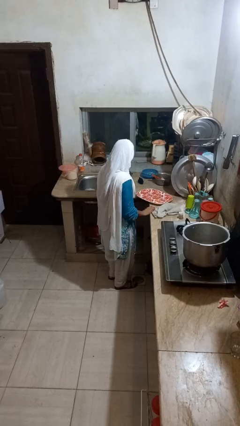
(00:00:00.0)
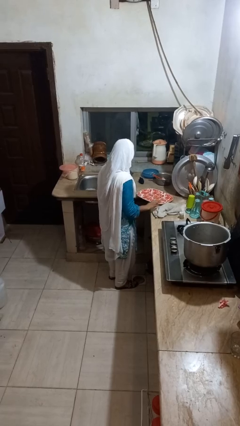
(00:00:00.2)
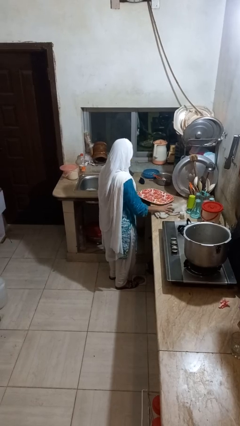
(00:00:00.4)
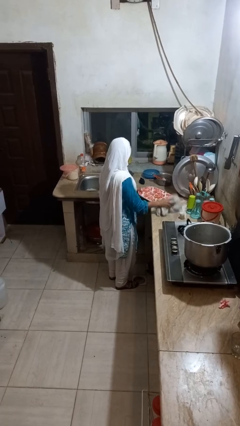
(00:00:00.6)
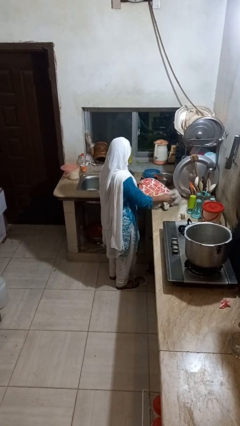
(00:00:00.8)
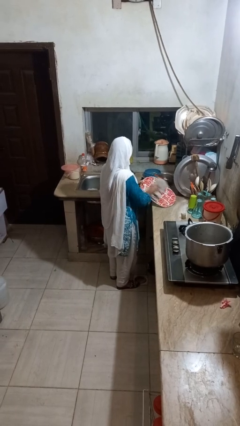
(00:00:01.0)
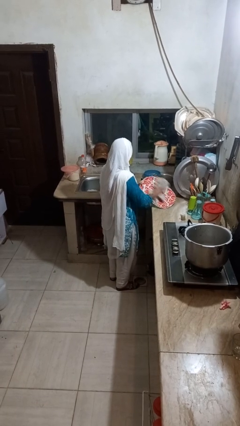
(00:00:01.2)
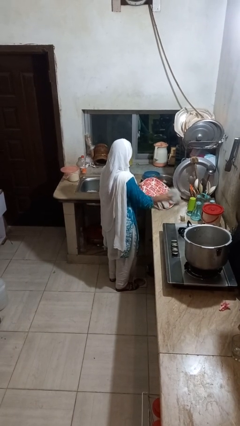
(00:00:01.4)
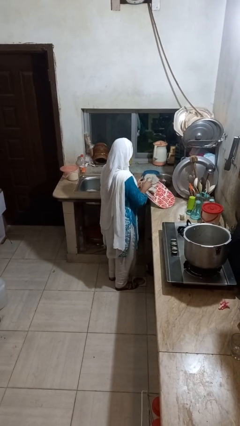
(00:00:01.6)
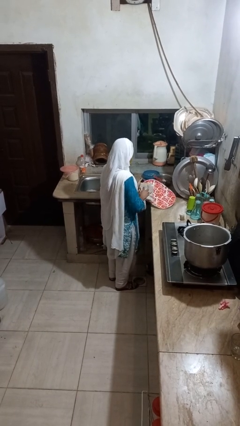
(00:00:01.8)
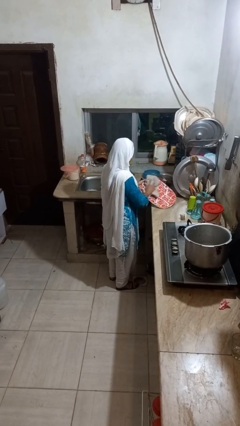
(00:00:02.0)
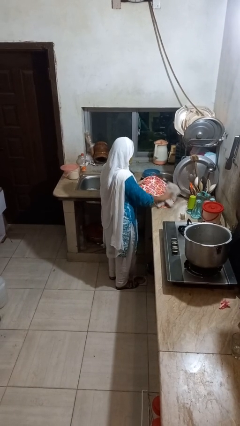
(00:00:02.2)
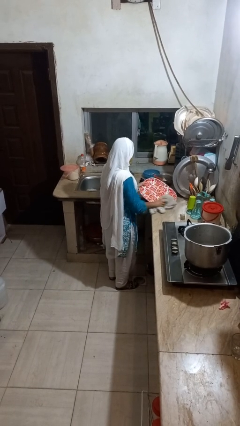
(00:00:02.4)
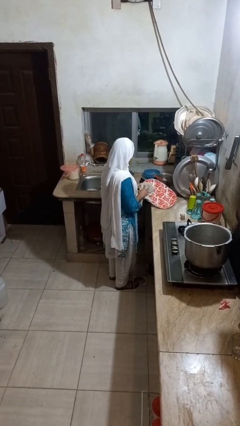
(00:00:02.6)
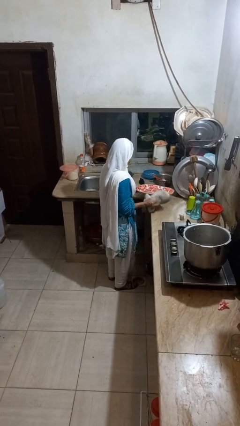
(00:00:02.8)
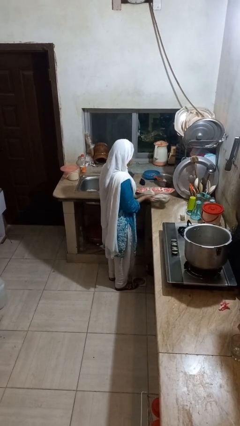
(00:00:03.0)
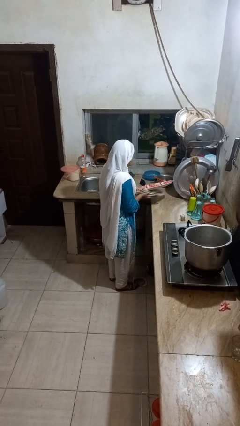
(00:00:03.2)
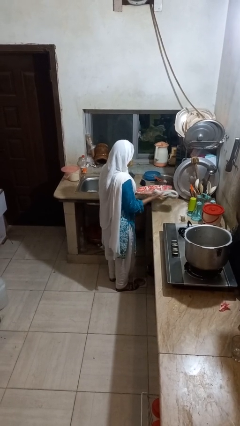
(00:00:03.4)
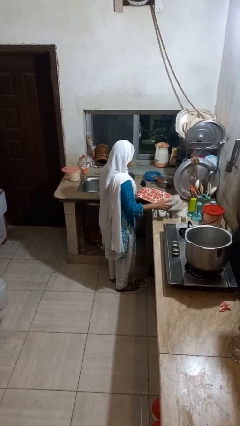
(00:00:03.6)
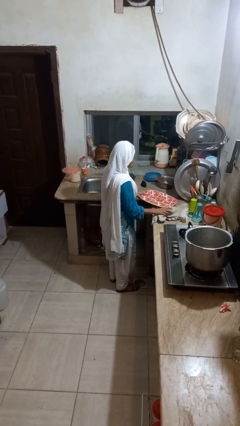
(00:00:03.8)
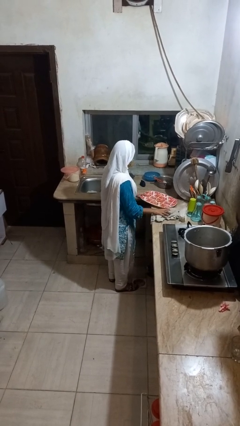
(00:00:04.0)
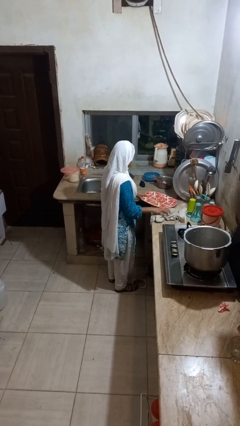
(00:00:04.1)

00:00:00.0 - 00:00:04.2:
person dries dish

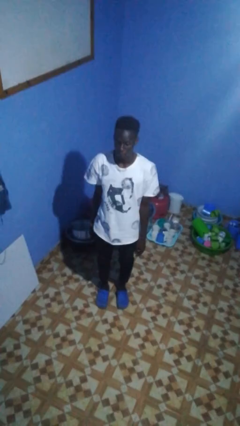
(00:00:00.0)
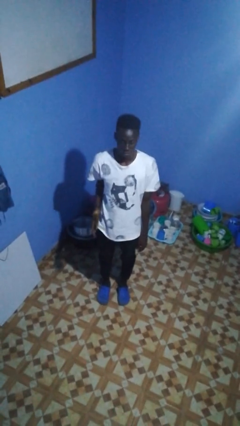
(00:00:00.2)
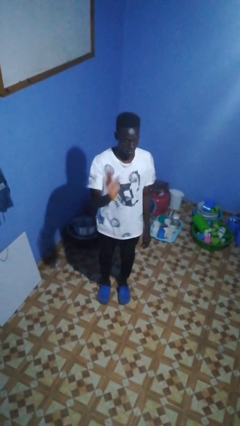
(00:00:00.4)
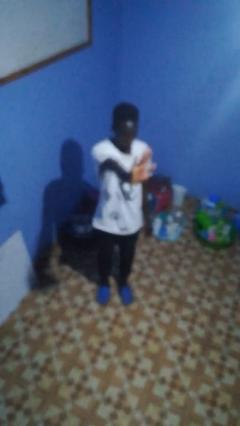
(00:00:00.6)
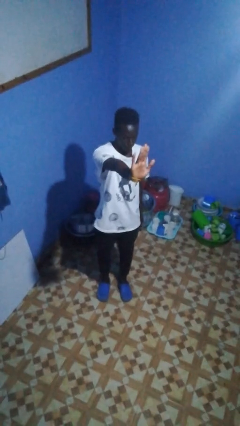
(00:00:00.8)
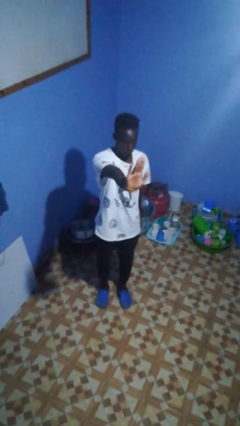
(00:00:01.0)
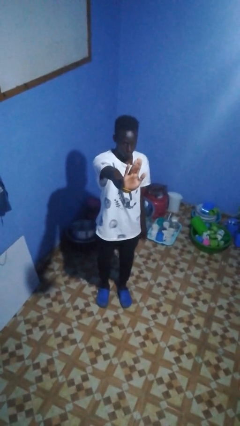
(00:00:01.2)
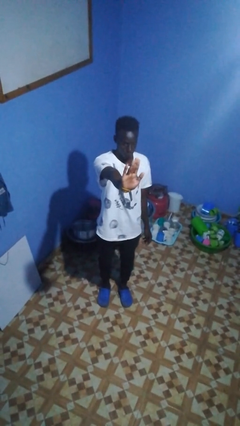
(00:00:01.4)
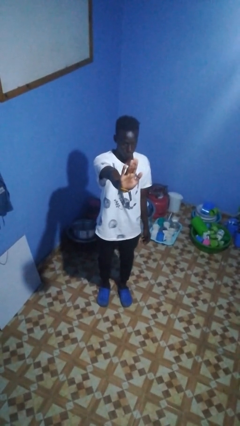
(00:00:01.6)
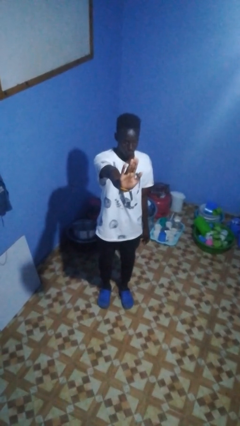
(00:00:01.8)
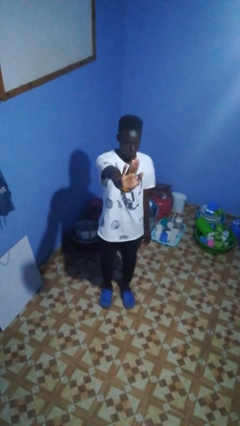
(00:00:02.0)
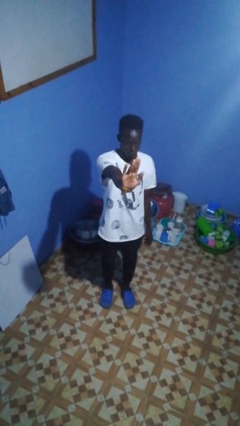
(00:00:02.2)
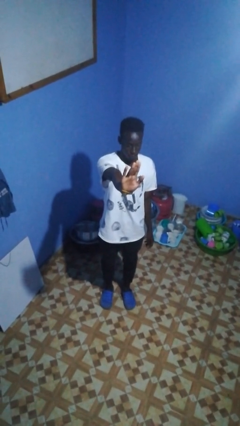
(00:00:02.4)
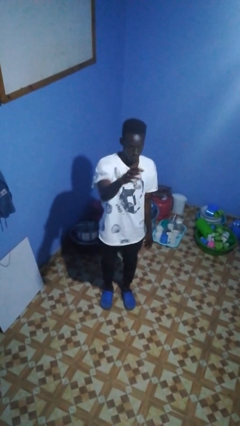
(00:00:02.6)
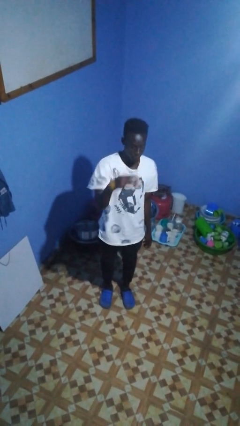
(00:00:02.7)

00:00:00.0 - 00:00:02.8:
person gestures stop

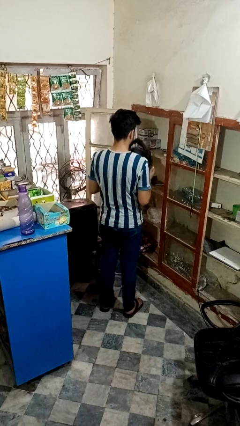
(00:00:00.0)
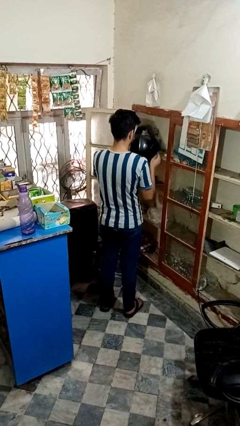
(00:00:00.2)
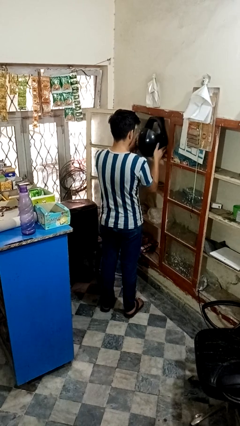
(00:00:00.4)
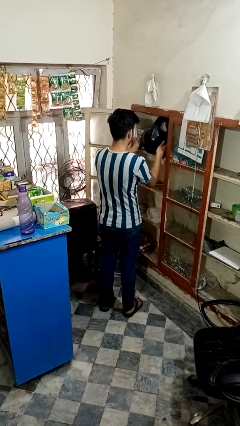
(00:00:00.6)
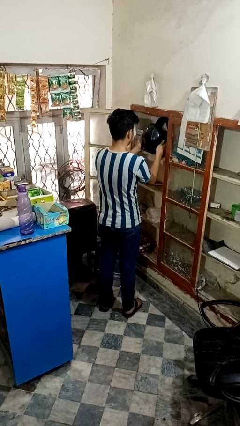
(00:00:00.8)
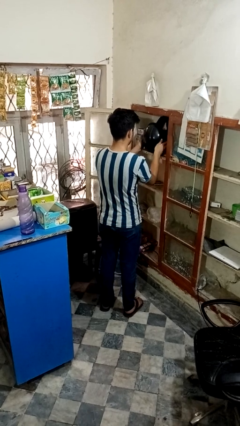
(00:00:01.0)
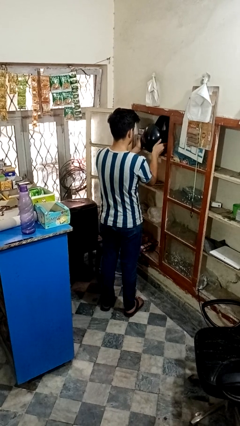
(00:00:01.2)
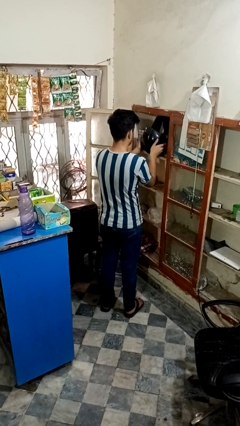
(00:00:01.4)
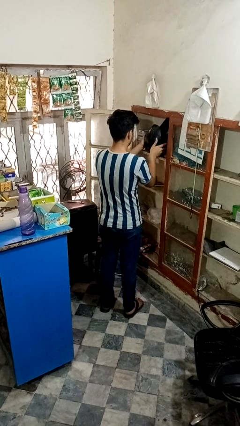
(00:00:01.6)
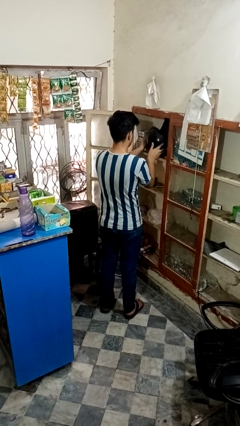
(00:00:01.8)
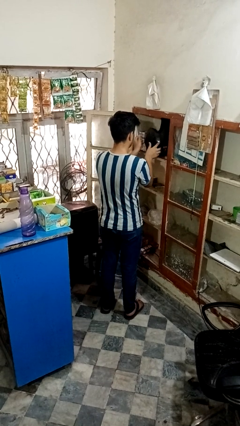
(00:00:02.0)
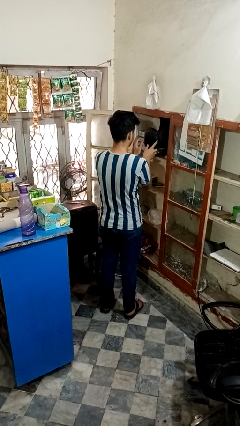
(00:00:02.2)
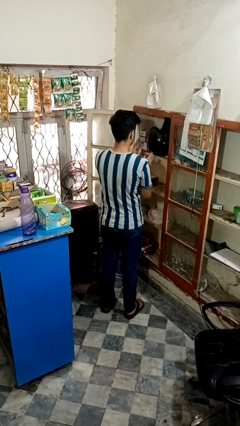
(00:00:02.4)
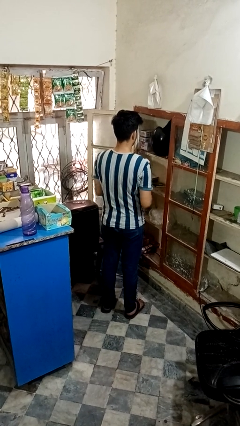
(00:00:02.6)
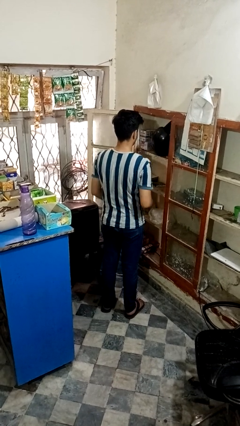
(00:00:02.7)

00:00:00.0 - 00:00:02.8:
person puts down object on shelf

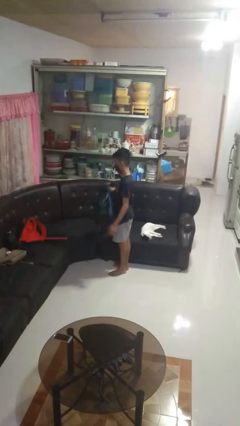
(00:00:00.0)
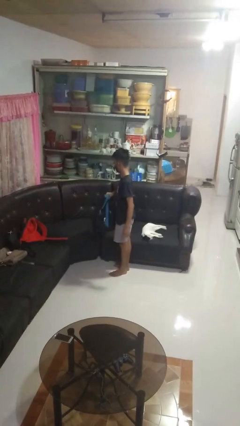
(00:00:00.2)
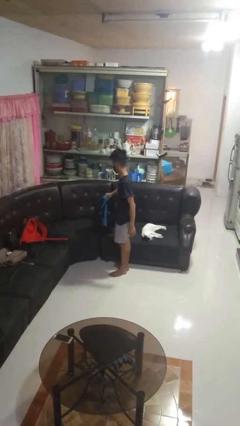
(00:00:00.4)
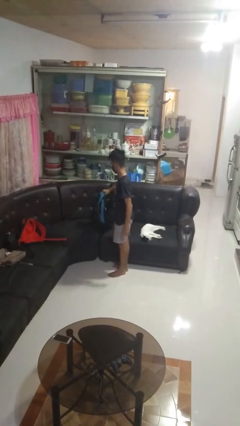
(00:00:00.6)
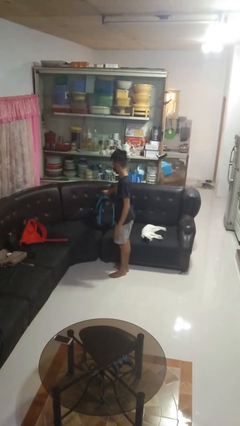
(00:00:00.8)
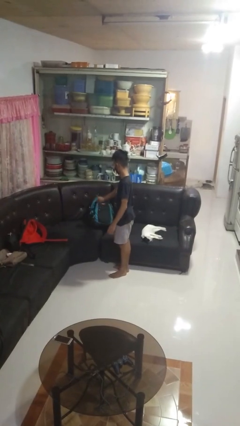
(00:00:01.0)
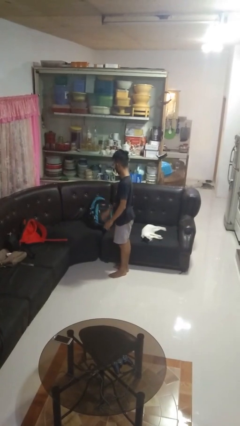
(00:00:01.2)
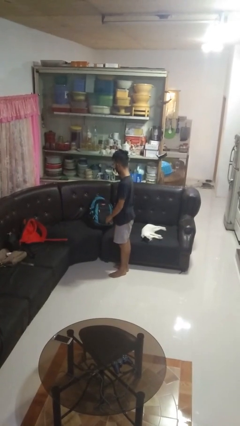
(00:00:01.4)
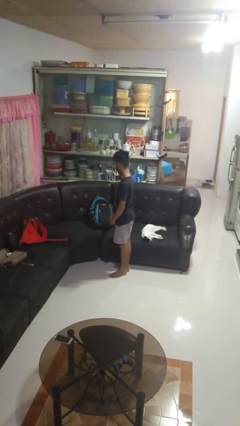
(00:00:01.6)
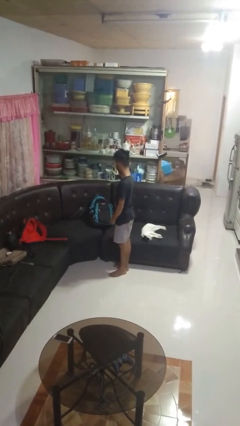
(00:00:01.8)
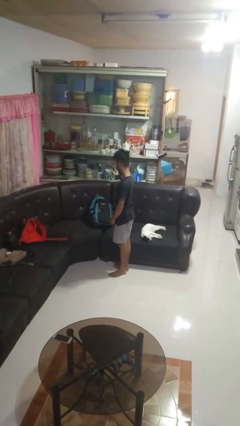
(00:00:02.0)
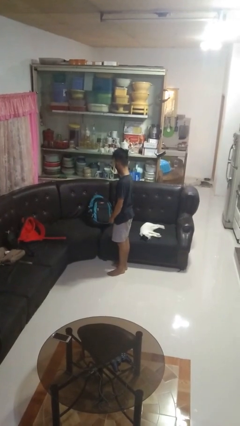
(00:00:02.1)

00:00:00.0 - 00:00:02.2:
person puts down object on couch

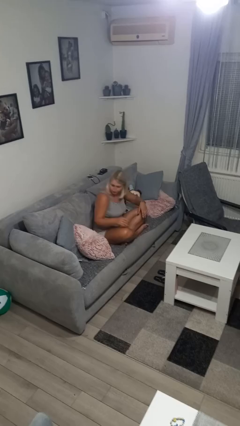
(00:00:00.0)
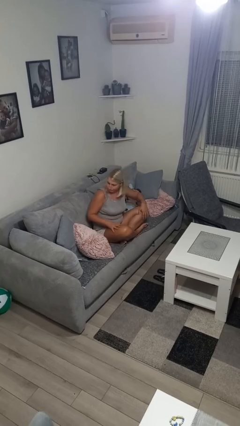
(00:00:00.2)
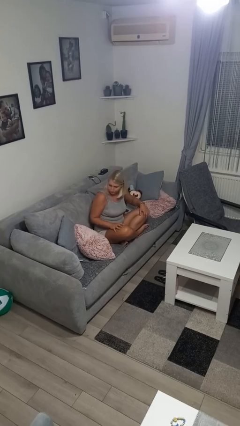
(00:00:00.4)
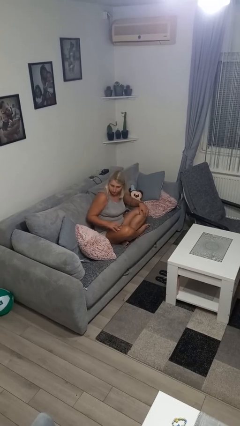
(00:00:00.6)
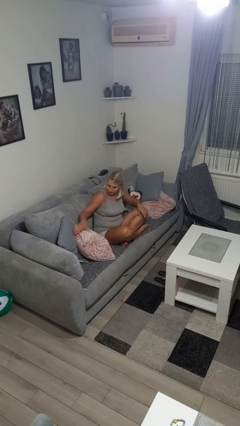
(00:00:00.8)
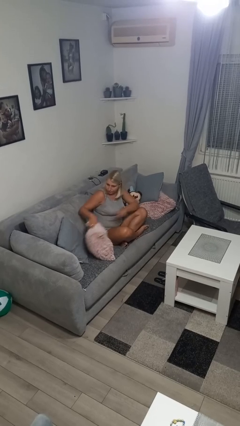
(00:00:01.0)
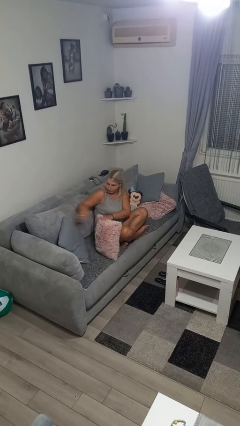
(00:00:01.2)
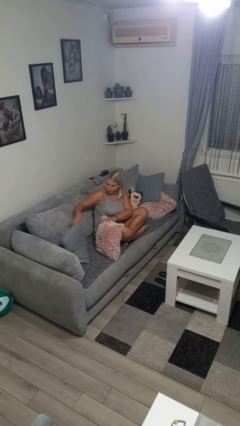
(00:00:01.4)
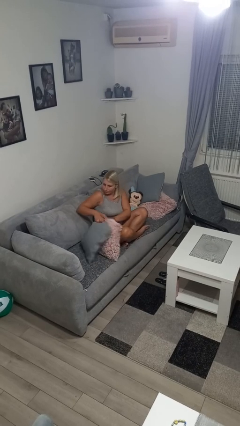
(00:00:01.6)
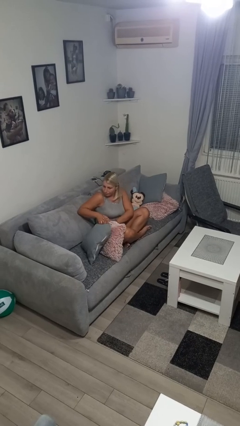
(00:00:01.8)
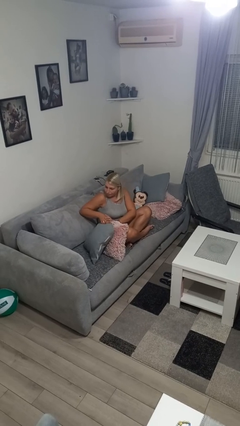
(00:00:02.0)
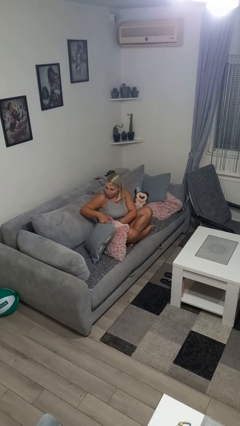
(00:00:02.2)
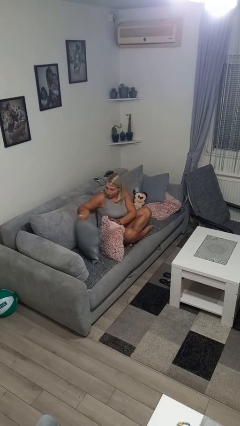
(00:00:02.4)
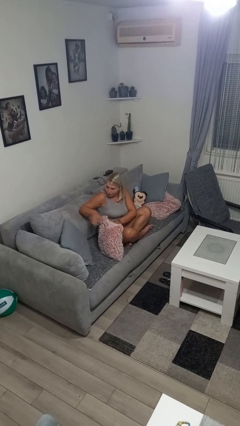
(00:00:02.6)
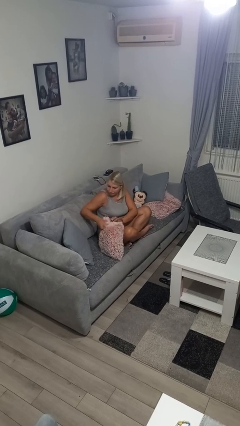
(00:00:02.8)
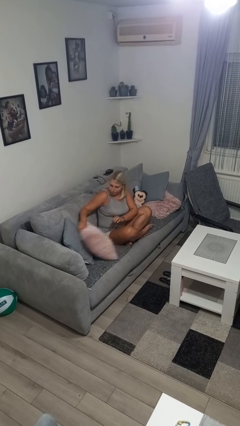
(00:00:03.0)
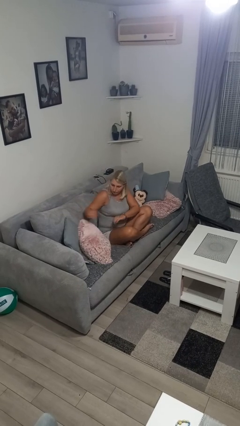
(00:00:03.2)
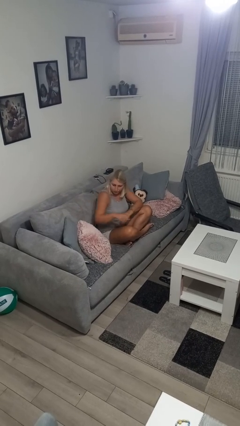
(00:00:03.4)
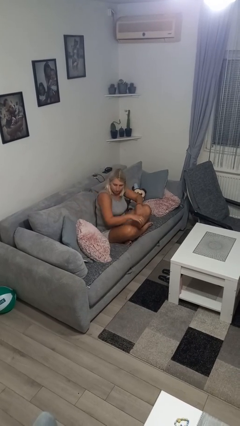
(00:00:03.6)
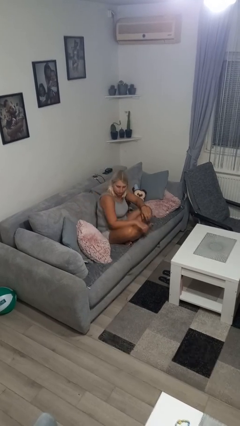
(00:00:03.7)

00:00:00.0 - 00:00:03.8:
person searches in couch

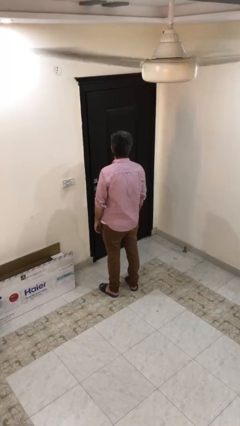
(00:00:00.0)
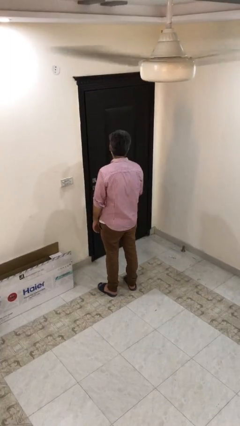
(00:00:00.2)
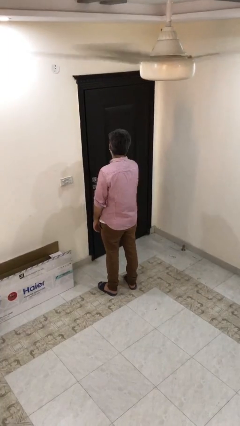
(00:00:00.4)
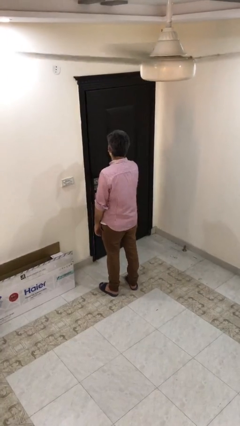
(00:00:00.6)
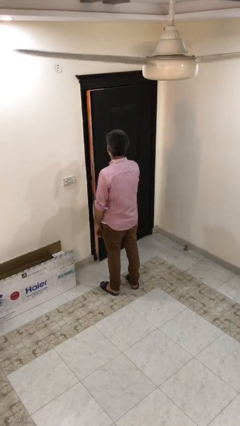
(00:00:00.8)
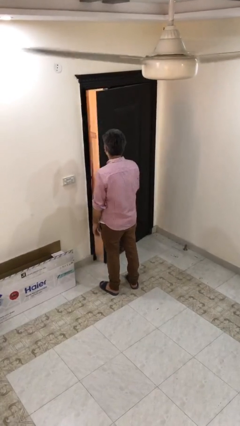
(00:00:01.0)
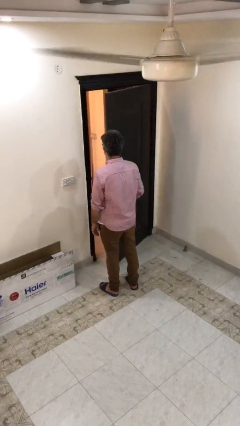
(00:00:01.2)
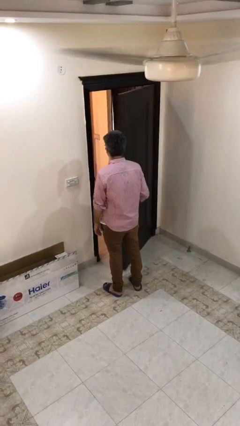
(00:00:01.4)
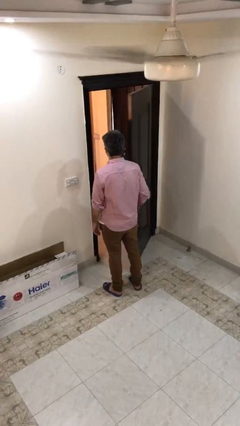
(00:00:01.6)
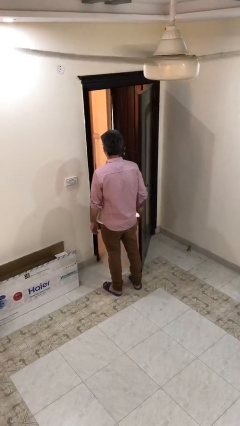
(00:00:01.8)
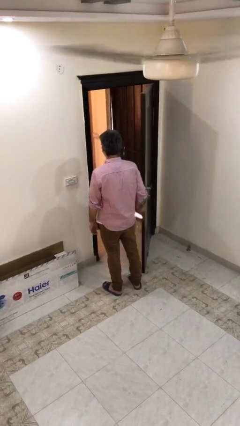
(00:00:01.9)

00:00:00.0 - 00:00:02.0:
person opens facility door
